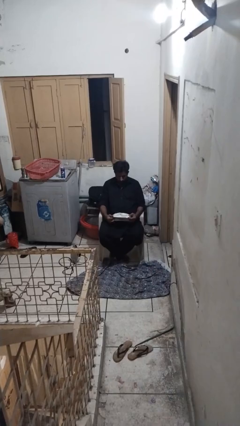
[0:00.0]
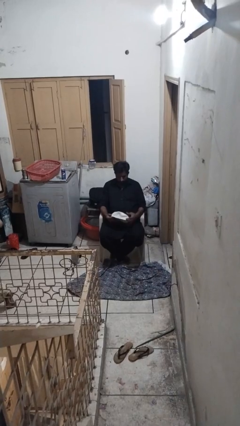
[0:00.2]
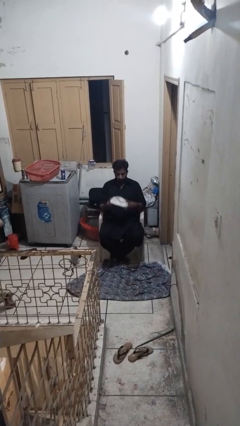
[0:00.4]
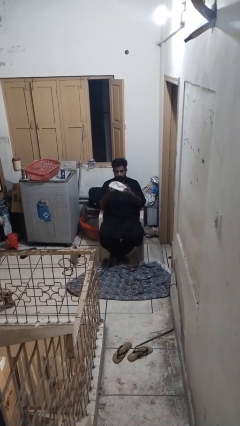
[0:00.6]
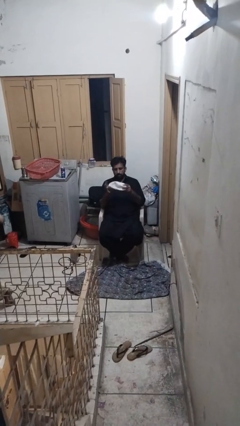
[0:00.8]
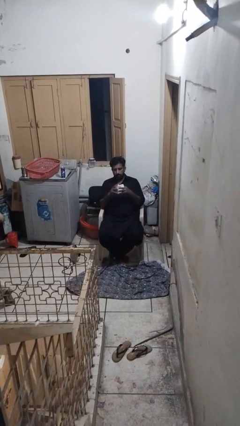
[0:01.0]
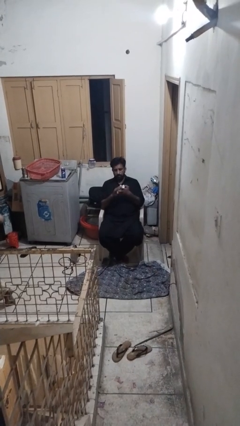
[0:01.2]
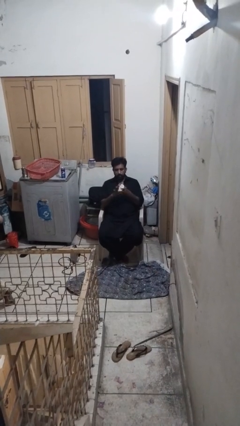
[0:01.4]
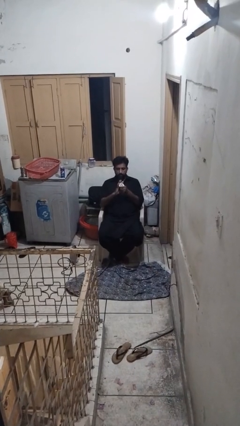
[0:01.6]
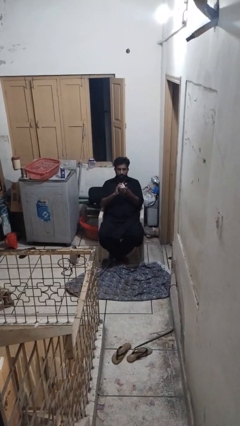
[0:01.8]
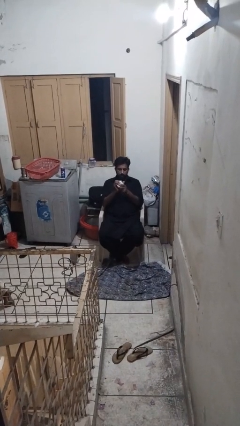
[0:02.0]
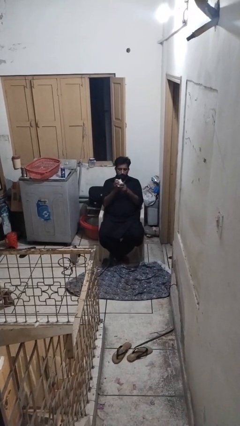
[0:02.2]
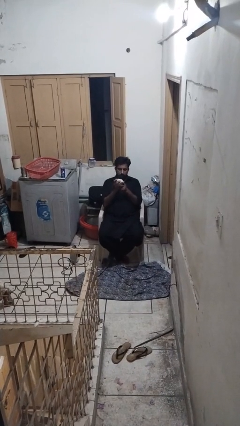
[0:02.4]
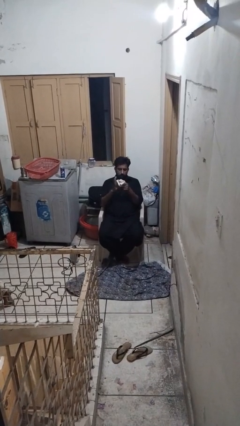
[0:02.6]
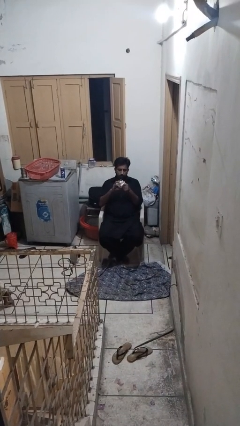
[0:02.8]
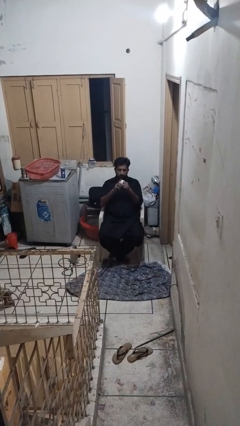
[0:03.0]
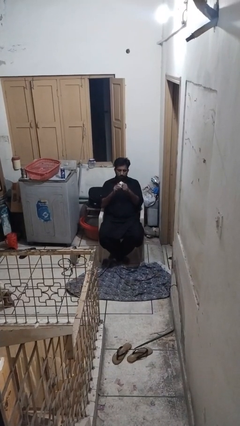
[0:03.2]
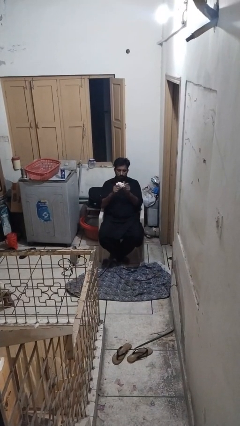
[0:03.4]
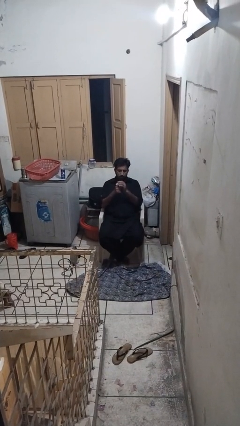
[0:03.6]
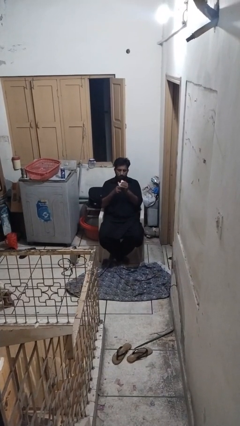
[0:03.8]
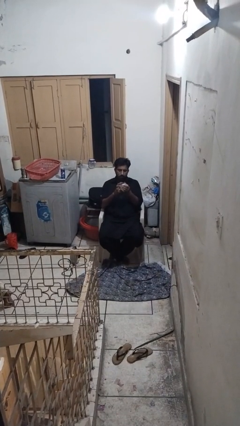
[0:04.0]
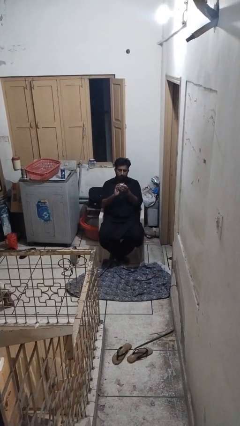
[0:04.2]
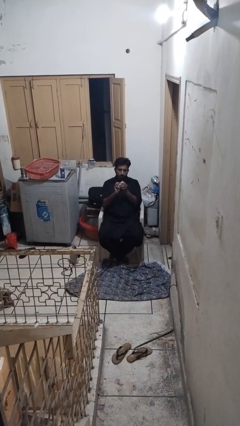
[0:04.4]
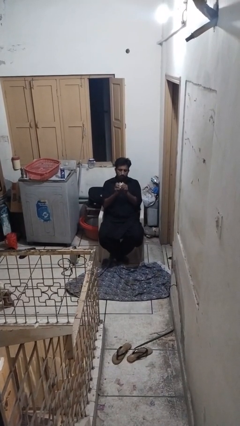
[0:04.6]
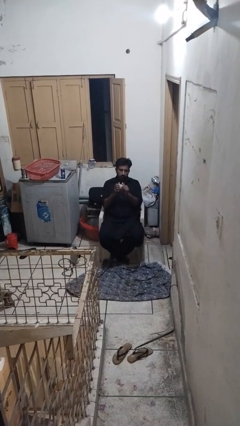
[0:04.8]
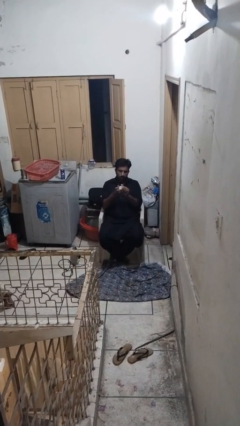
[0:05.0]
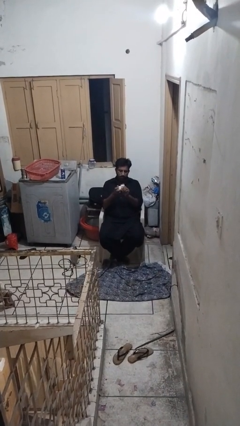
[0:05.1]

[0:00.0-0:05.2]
person squeezes object

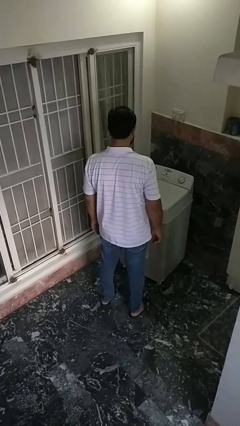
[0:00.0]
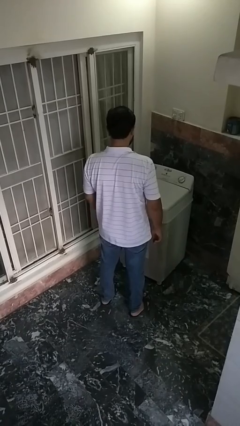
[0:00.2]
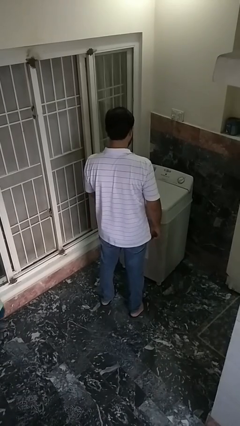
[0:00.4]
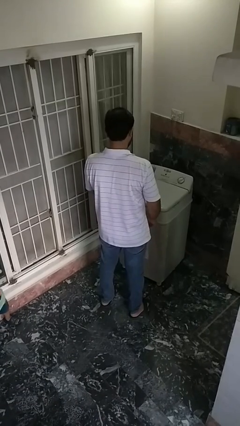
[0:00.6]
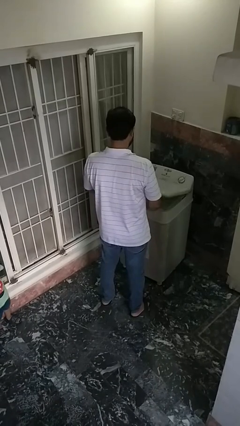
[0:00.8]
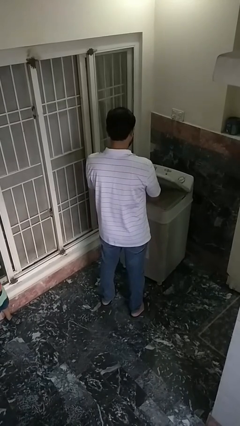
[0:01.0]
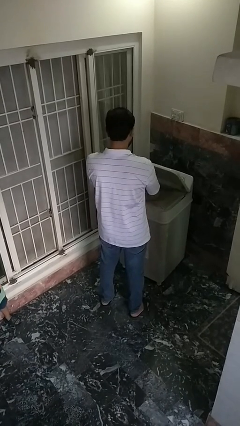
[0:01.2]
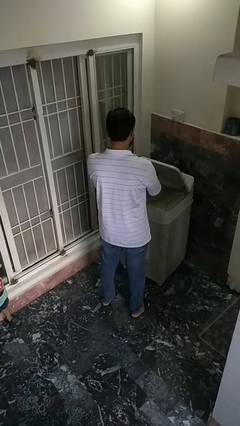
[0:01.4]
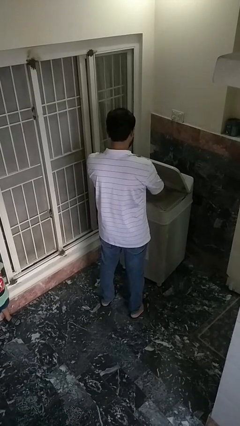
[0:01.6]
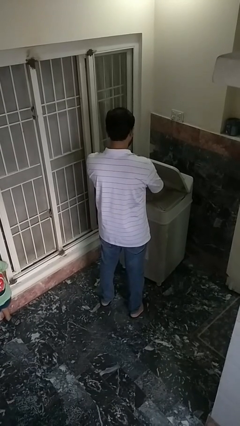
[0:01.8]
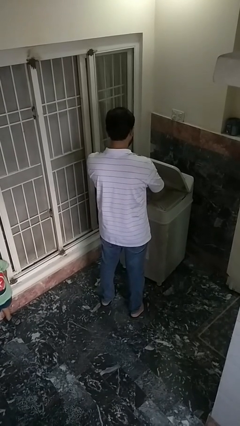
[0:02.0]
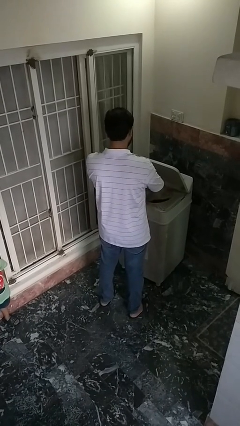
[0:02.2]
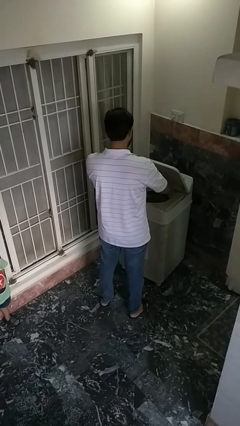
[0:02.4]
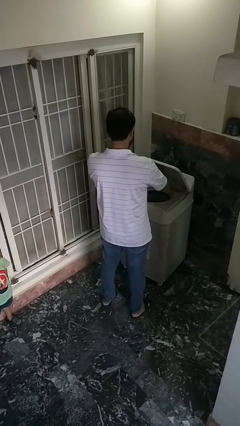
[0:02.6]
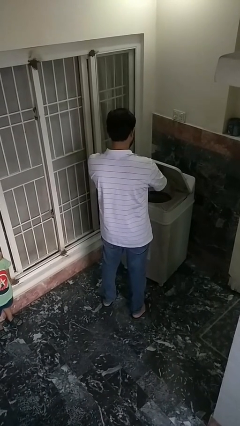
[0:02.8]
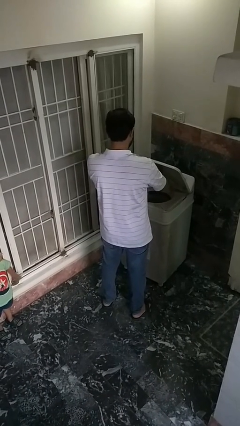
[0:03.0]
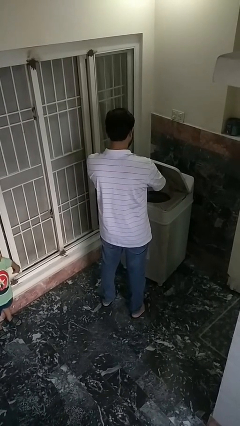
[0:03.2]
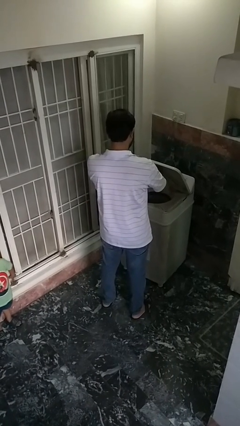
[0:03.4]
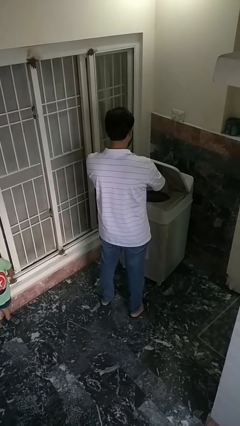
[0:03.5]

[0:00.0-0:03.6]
person opens clothes washer

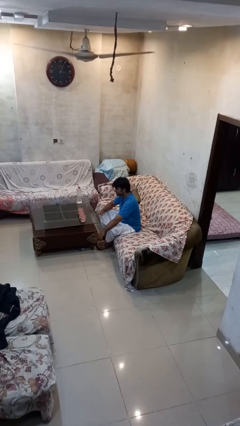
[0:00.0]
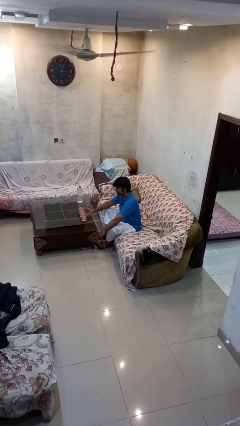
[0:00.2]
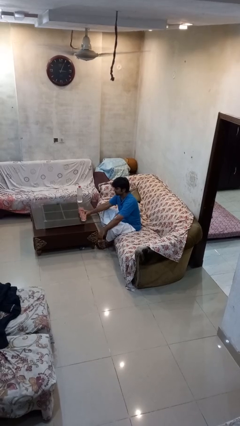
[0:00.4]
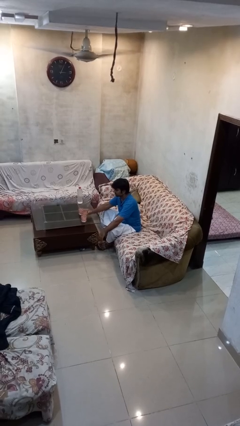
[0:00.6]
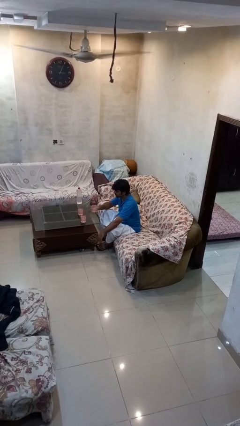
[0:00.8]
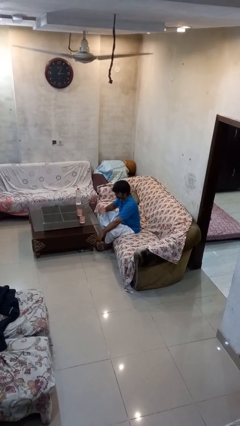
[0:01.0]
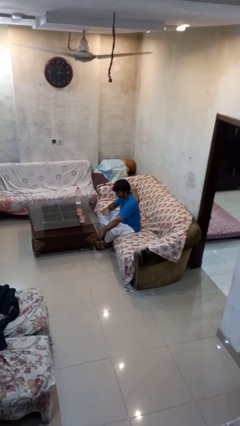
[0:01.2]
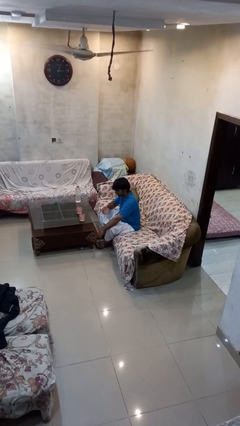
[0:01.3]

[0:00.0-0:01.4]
person picks up object from table

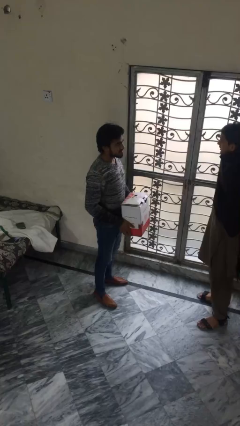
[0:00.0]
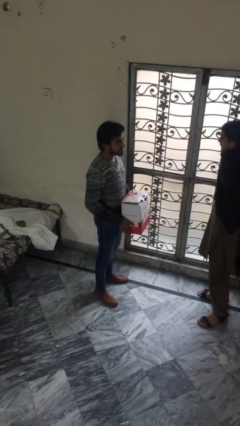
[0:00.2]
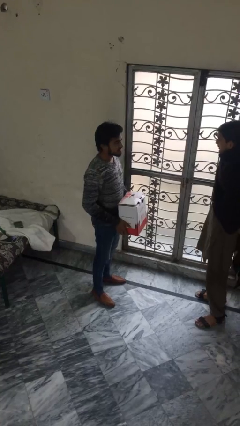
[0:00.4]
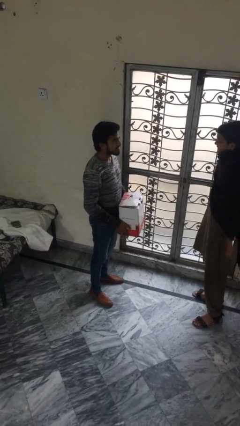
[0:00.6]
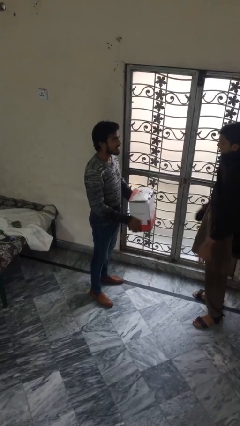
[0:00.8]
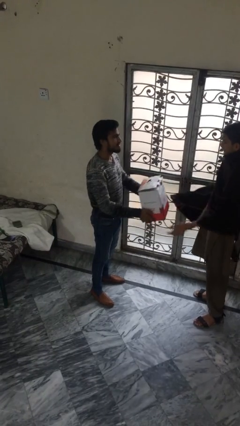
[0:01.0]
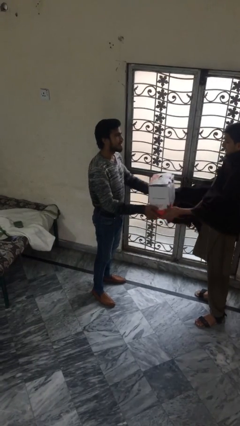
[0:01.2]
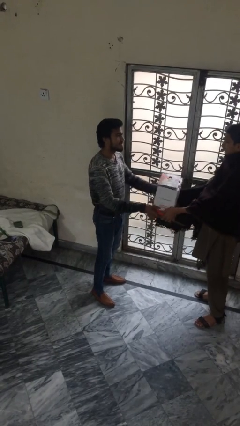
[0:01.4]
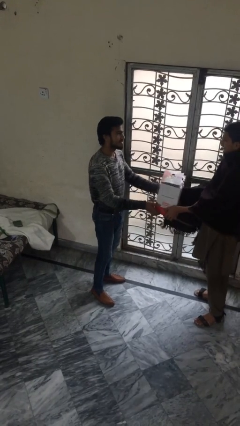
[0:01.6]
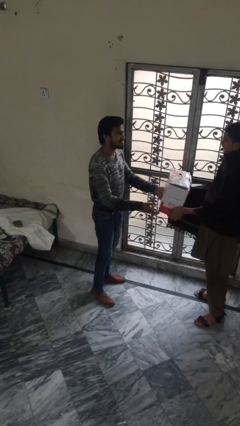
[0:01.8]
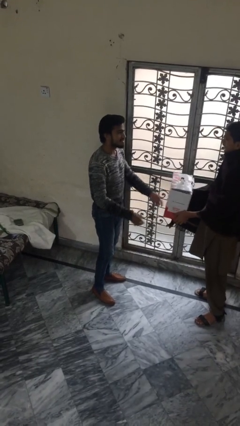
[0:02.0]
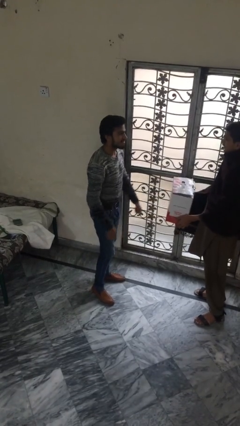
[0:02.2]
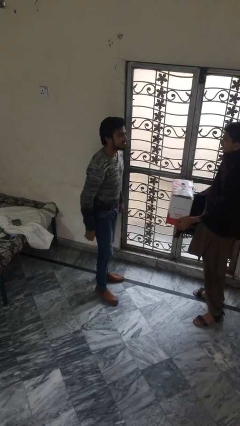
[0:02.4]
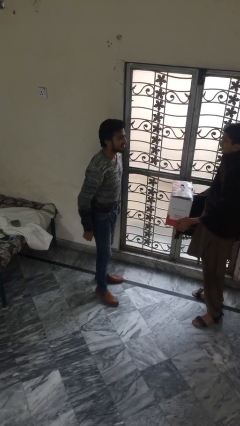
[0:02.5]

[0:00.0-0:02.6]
person transfers object to person

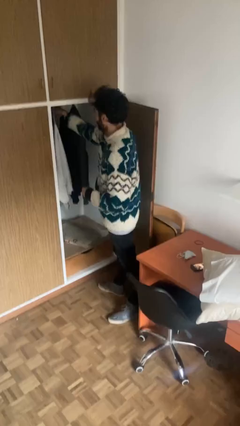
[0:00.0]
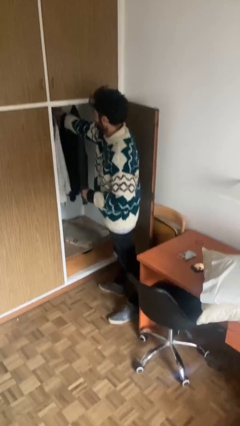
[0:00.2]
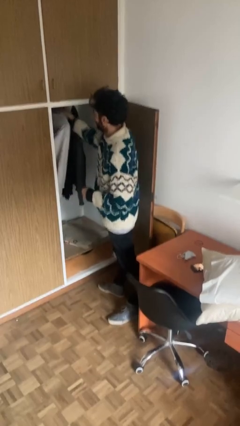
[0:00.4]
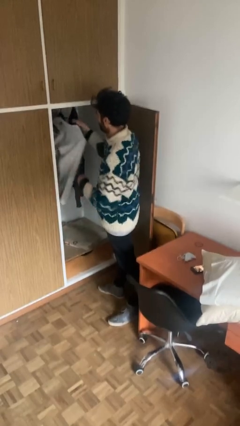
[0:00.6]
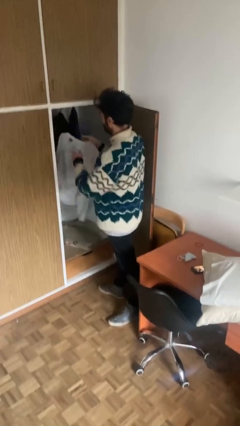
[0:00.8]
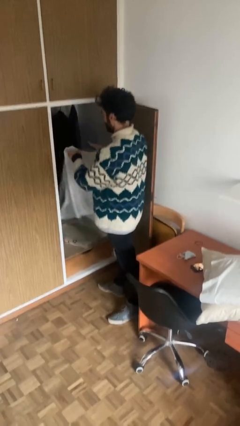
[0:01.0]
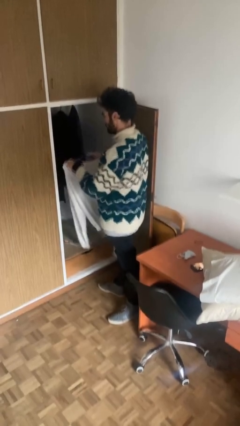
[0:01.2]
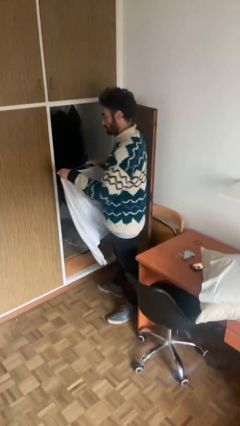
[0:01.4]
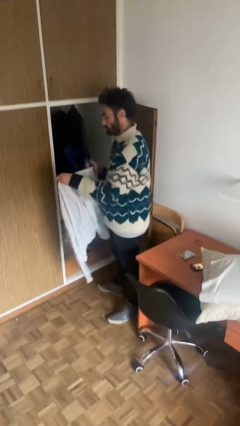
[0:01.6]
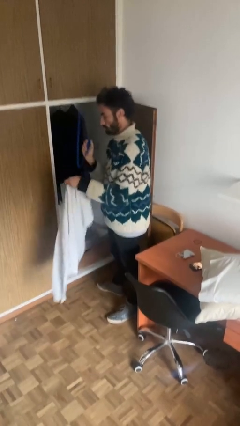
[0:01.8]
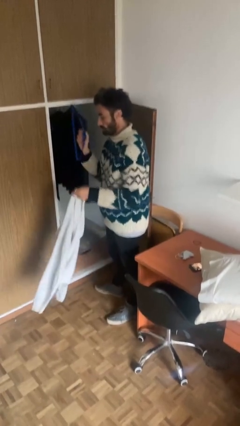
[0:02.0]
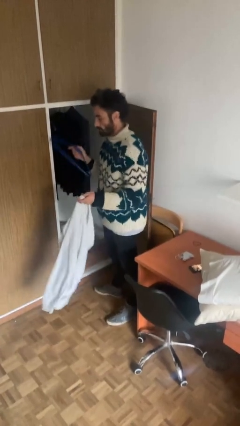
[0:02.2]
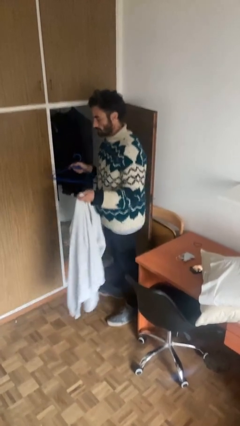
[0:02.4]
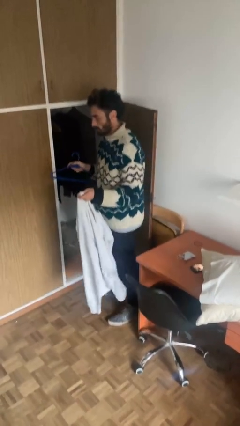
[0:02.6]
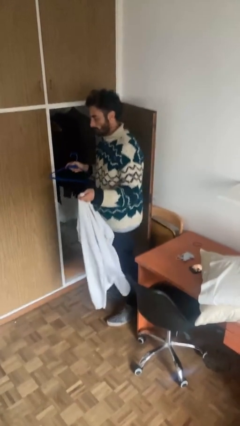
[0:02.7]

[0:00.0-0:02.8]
person takes clothes from closet

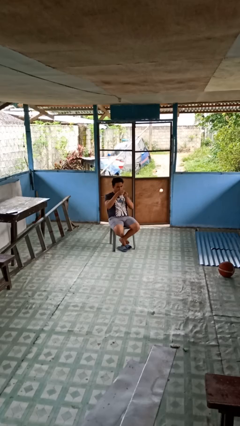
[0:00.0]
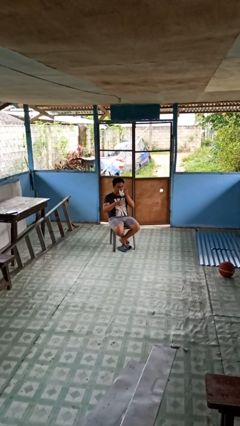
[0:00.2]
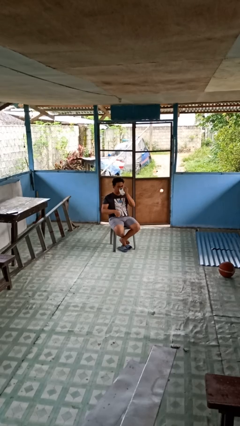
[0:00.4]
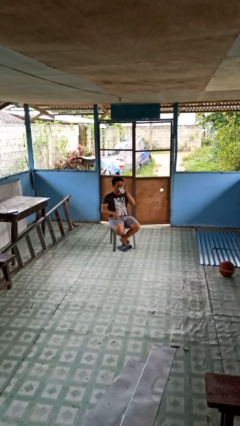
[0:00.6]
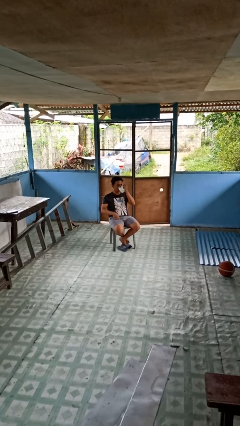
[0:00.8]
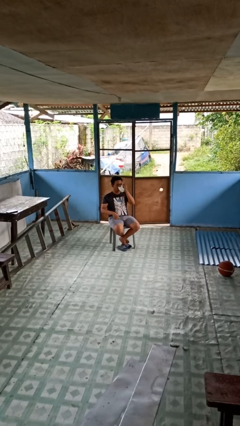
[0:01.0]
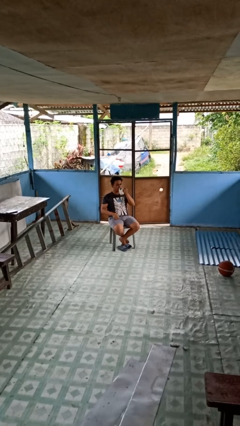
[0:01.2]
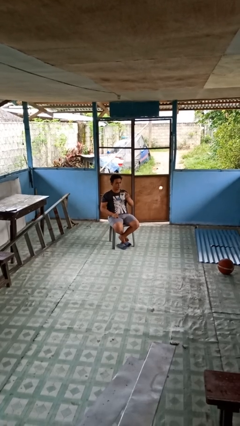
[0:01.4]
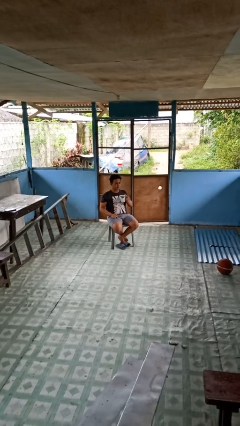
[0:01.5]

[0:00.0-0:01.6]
person drinks from mug

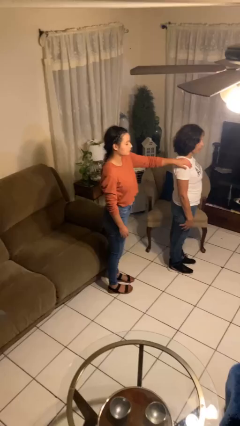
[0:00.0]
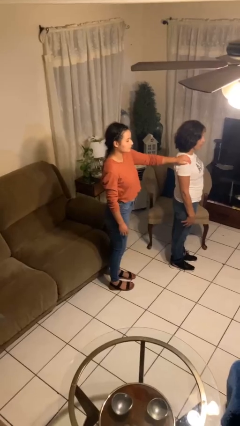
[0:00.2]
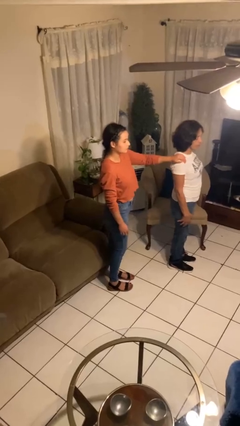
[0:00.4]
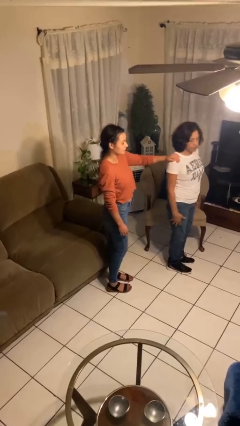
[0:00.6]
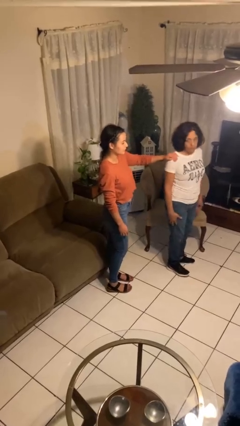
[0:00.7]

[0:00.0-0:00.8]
person grabs person by shoulder
